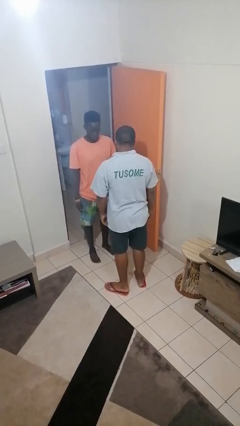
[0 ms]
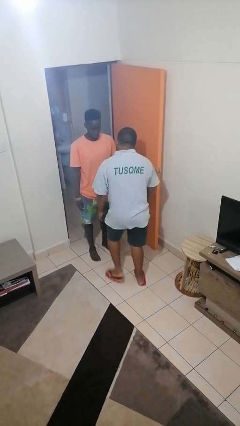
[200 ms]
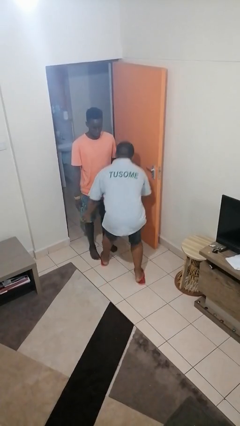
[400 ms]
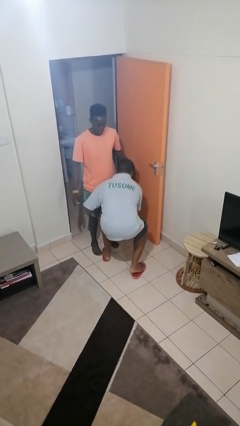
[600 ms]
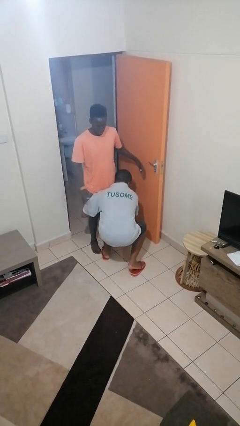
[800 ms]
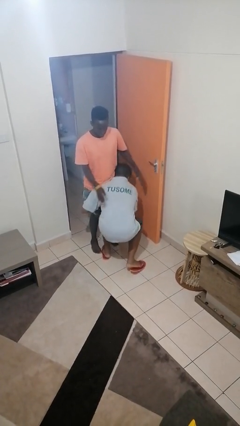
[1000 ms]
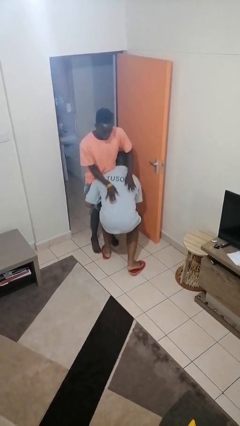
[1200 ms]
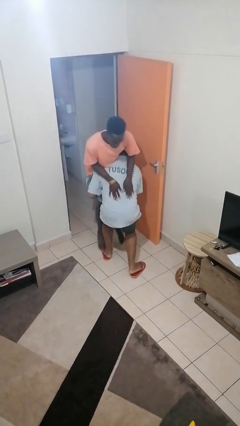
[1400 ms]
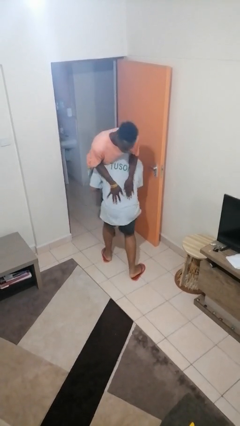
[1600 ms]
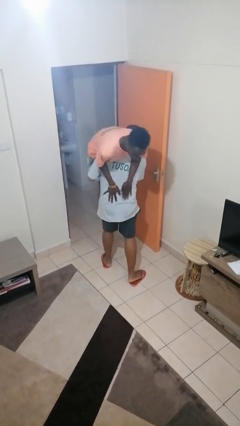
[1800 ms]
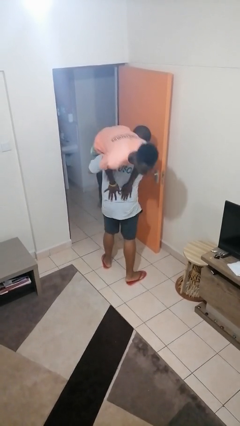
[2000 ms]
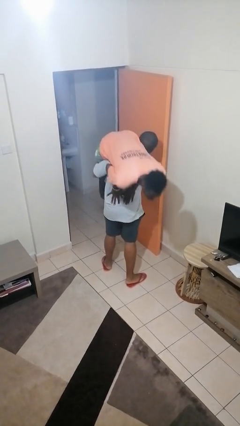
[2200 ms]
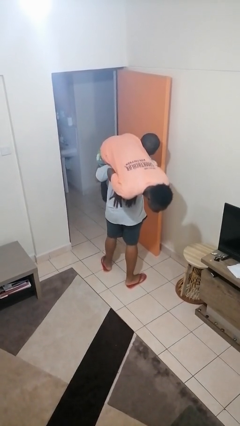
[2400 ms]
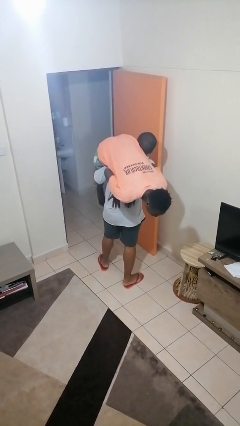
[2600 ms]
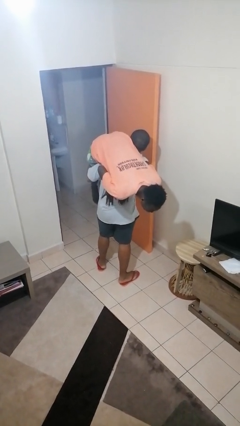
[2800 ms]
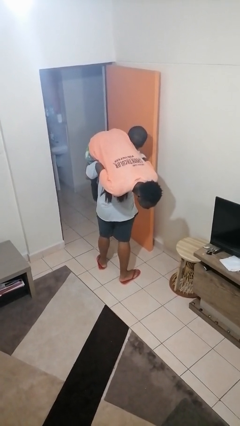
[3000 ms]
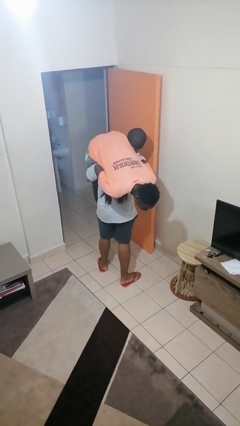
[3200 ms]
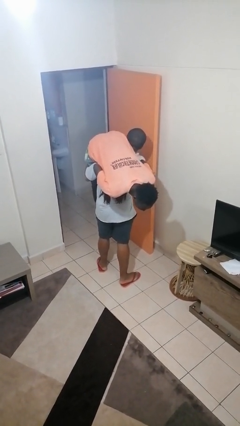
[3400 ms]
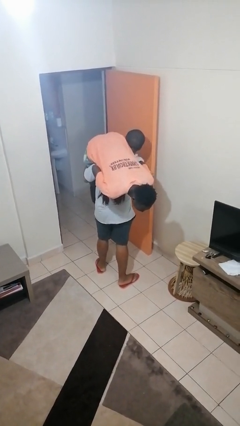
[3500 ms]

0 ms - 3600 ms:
person carries person over shoulder

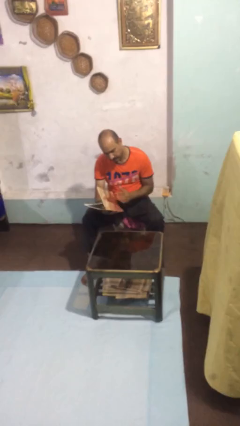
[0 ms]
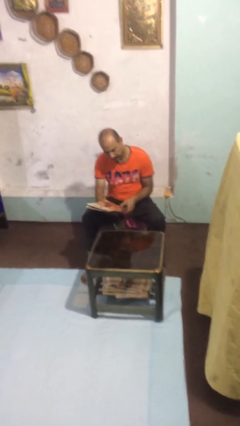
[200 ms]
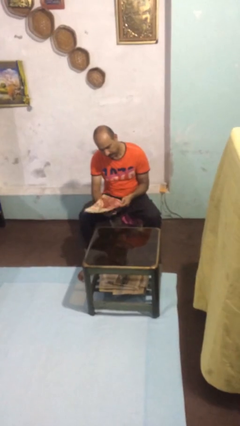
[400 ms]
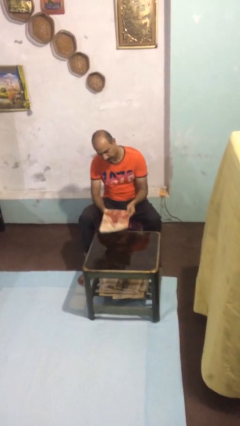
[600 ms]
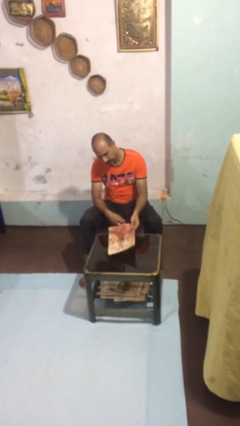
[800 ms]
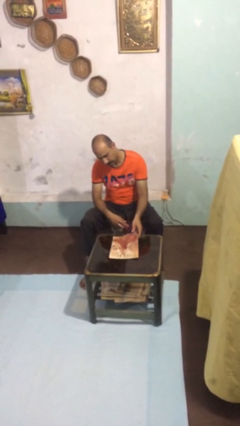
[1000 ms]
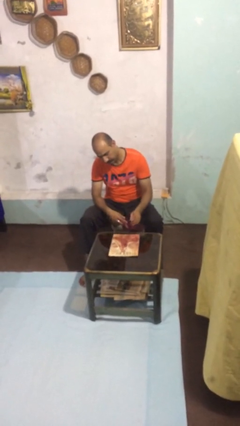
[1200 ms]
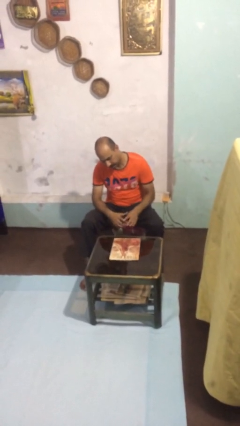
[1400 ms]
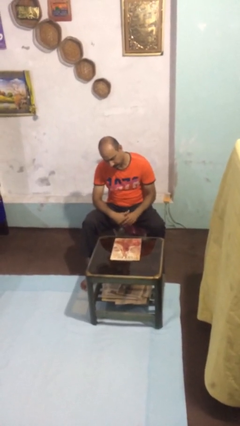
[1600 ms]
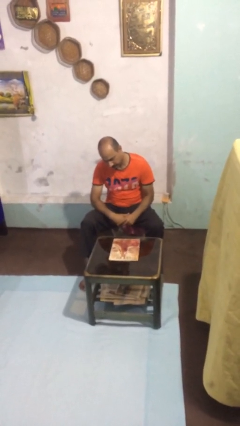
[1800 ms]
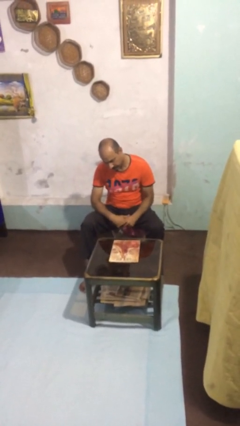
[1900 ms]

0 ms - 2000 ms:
person puts down object on table

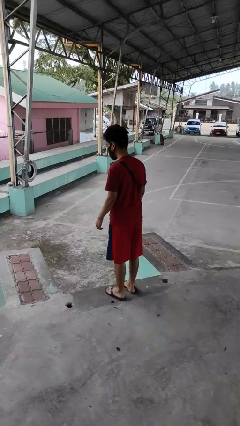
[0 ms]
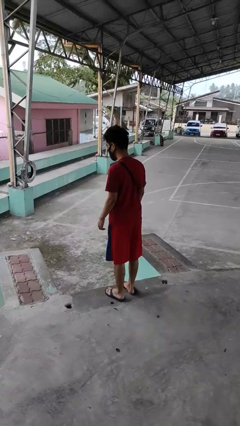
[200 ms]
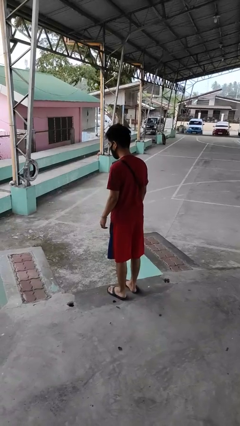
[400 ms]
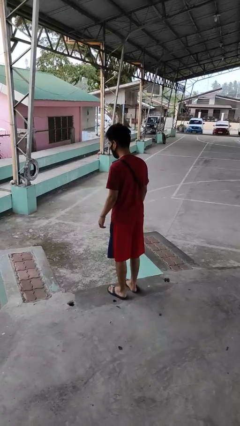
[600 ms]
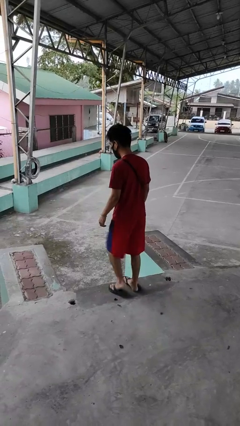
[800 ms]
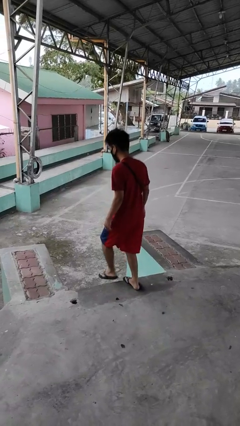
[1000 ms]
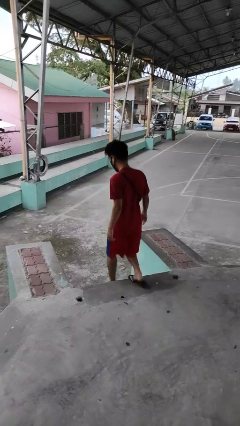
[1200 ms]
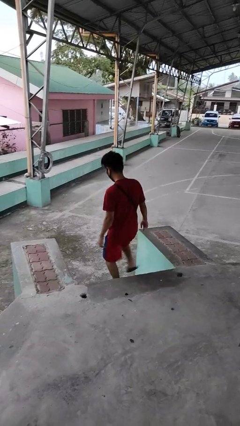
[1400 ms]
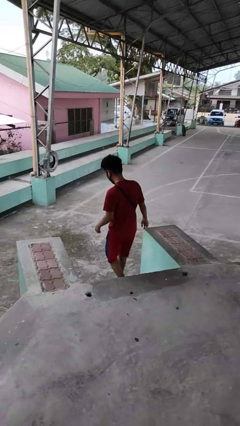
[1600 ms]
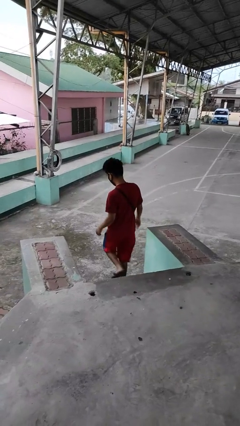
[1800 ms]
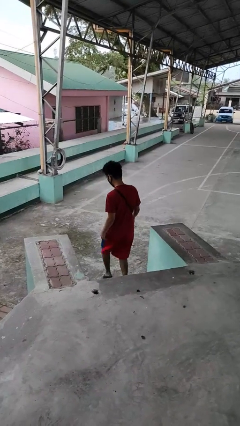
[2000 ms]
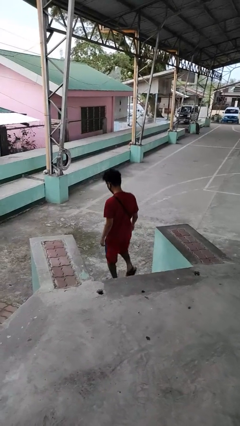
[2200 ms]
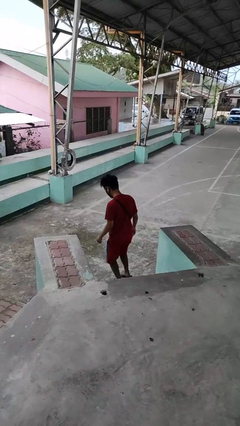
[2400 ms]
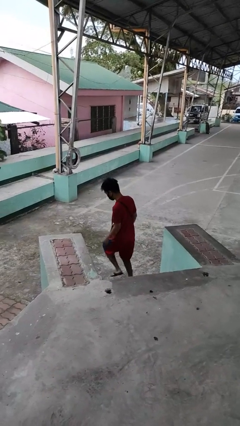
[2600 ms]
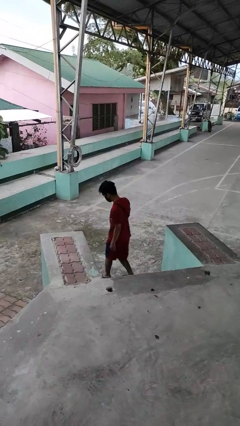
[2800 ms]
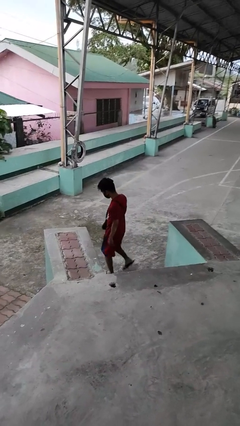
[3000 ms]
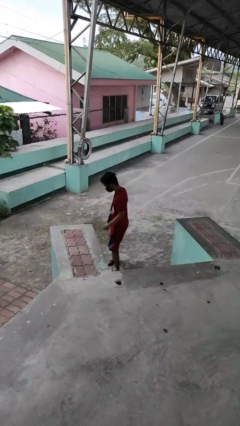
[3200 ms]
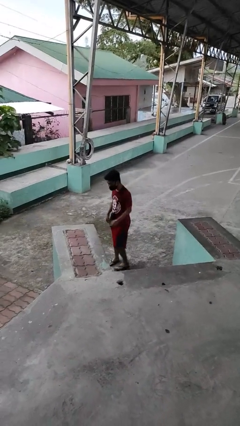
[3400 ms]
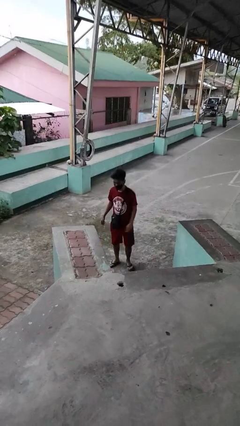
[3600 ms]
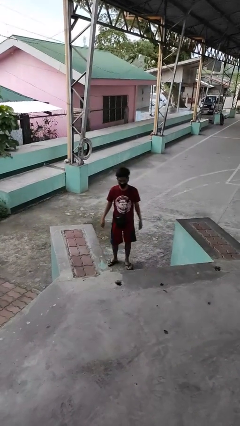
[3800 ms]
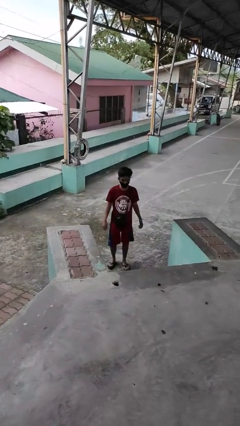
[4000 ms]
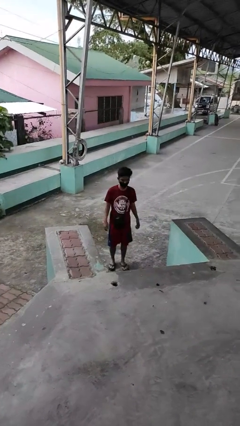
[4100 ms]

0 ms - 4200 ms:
person climbs down stairs

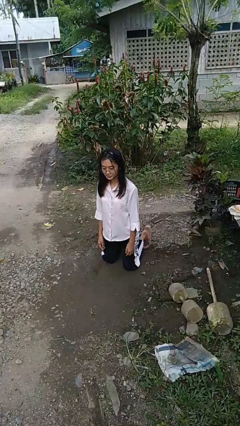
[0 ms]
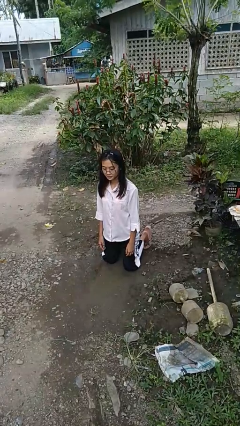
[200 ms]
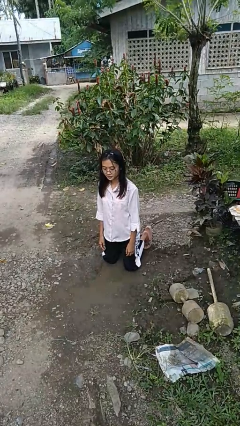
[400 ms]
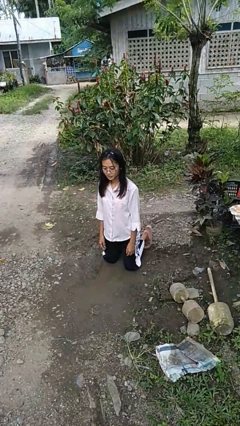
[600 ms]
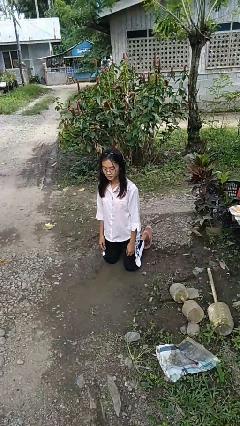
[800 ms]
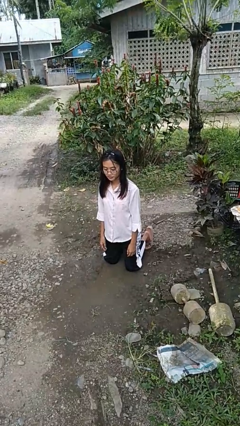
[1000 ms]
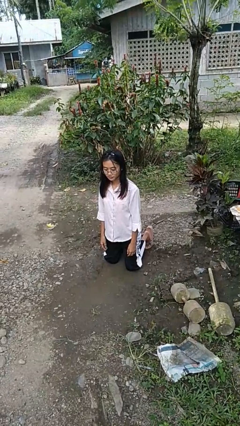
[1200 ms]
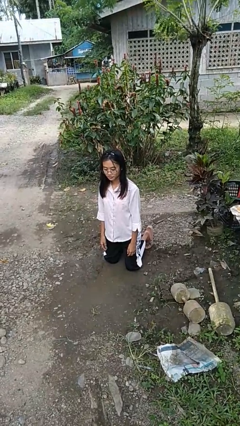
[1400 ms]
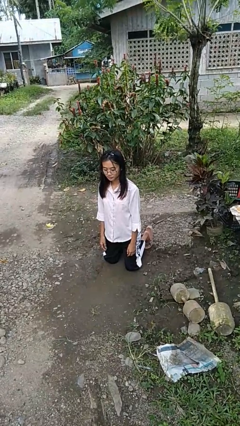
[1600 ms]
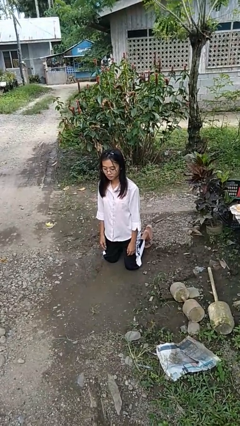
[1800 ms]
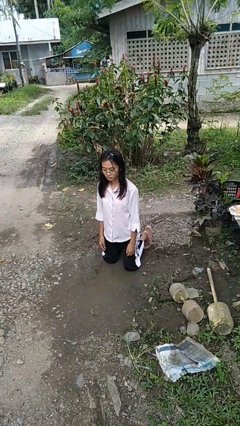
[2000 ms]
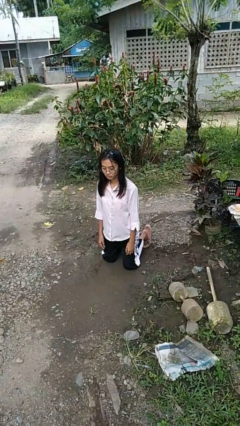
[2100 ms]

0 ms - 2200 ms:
person kneels

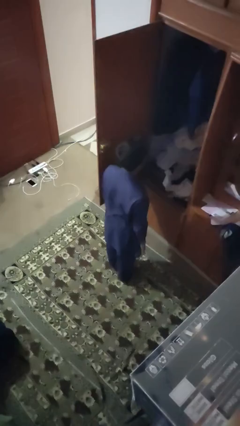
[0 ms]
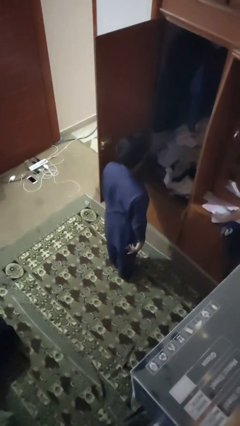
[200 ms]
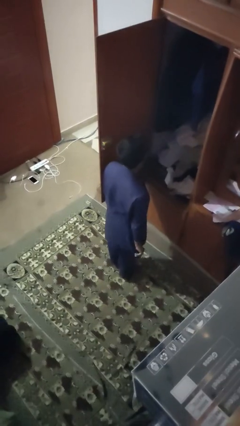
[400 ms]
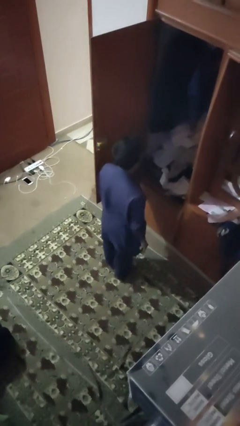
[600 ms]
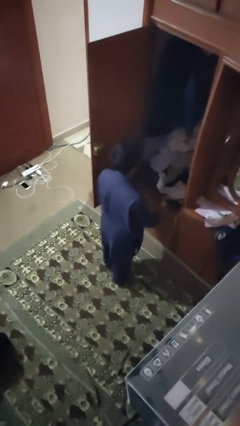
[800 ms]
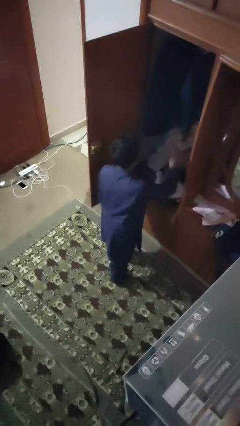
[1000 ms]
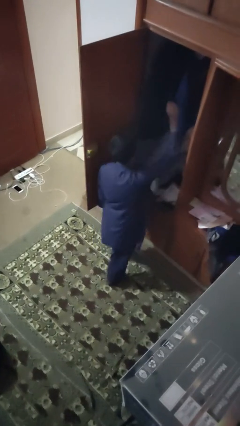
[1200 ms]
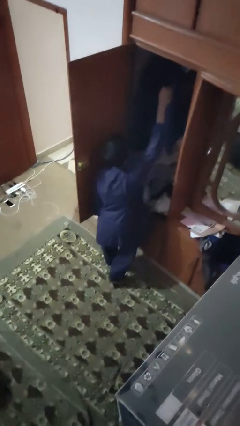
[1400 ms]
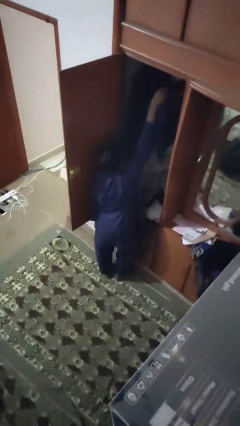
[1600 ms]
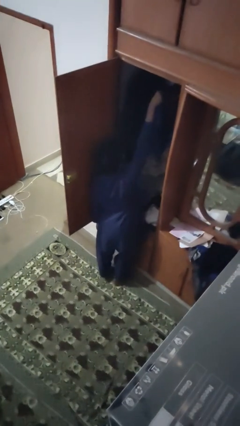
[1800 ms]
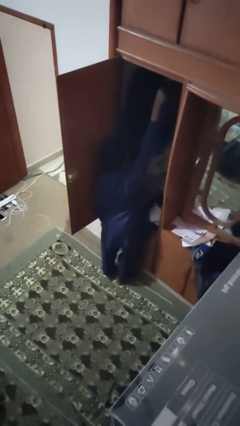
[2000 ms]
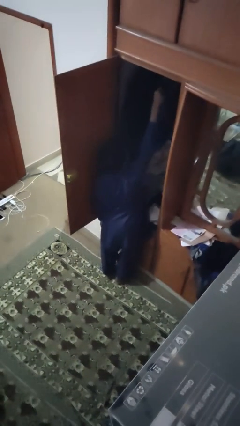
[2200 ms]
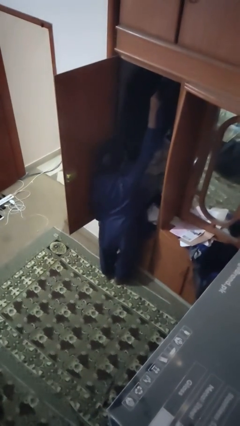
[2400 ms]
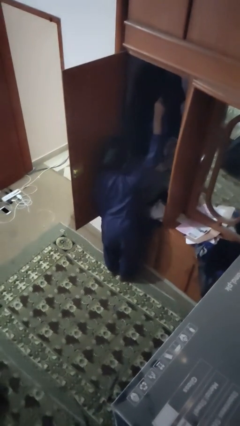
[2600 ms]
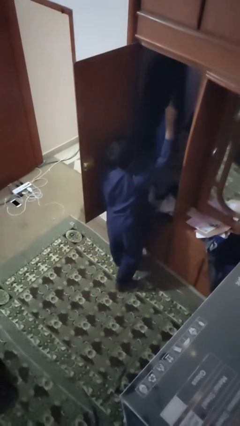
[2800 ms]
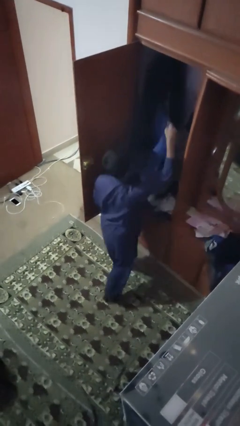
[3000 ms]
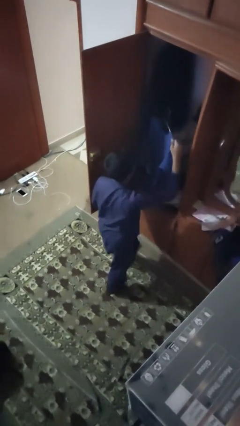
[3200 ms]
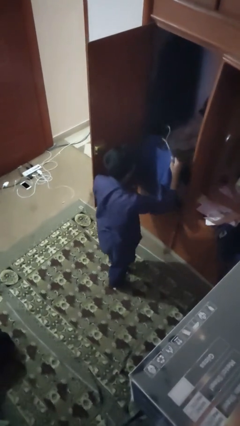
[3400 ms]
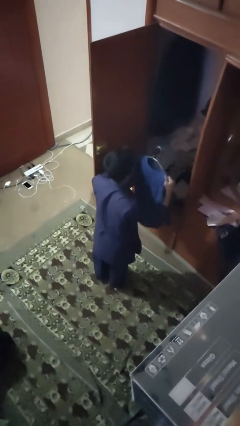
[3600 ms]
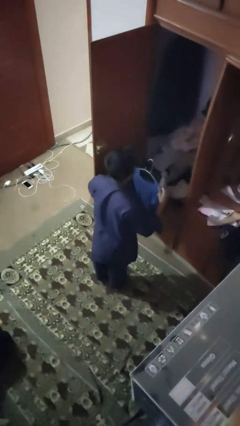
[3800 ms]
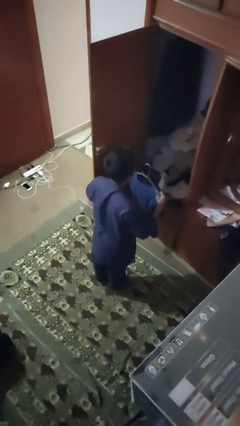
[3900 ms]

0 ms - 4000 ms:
person takes clothes from closet

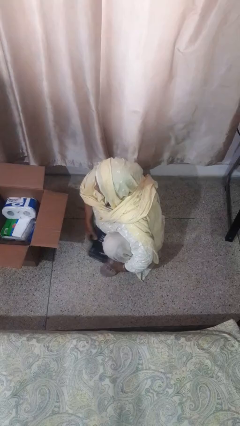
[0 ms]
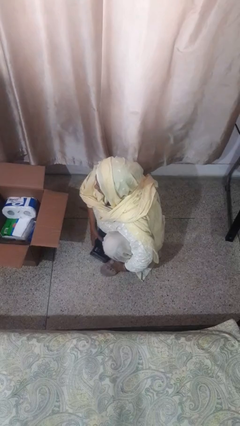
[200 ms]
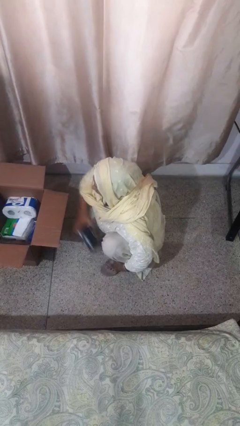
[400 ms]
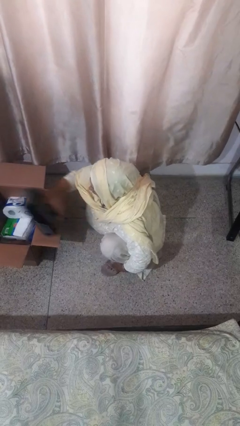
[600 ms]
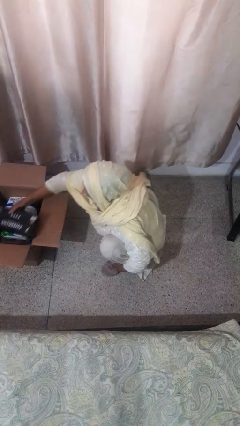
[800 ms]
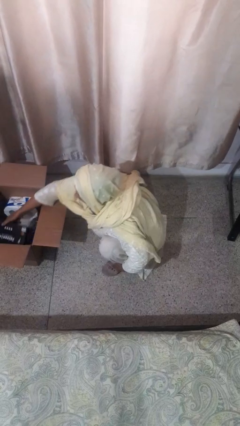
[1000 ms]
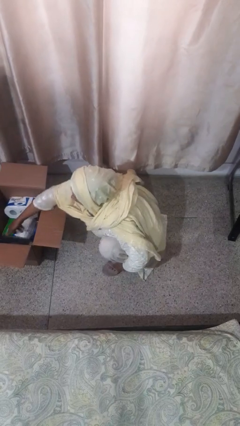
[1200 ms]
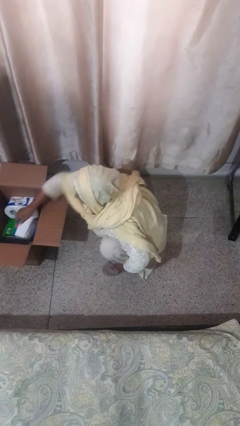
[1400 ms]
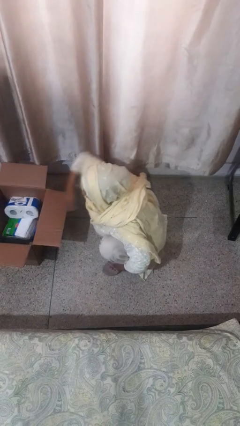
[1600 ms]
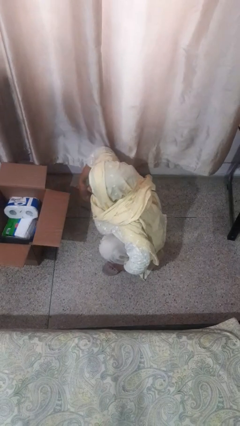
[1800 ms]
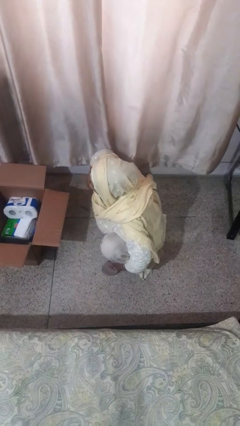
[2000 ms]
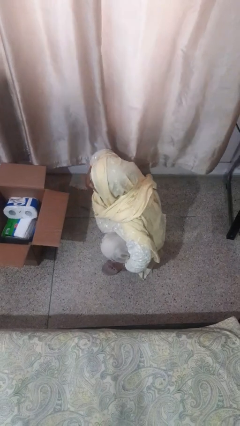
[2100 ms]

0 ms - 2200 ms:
person puts object into box
